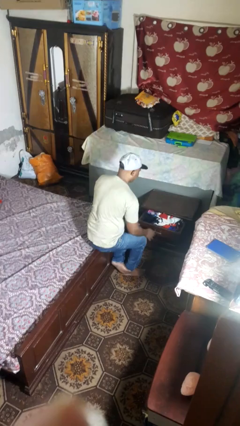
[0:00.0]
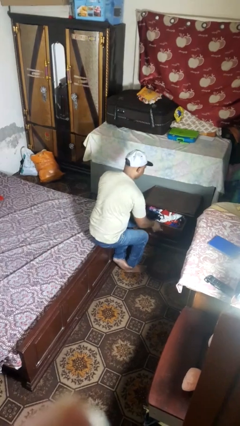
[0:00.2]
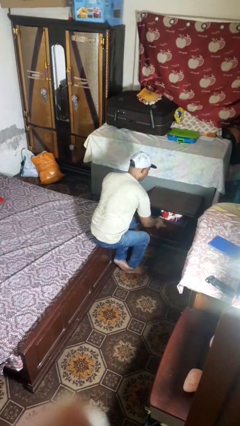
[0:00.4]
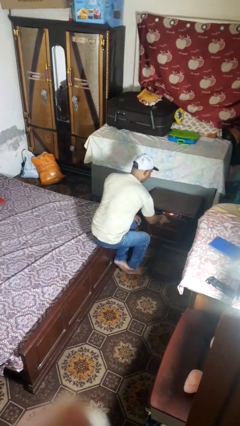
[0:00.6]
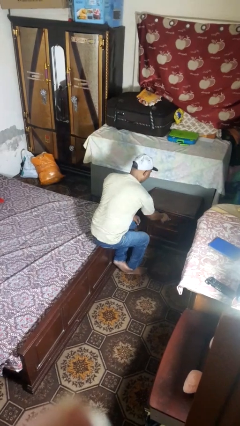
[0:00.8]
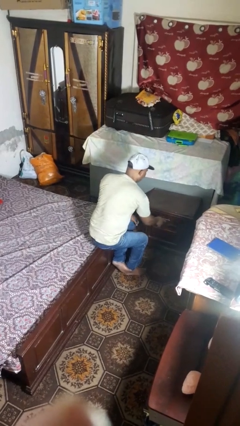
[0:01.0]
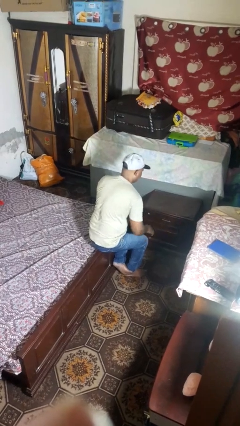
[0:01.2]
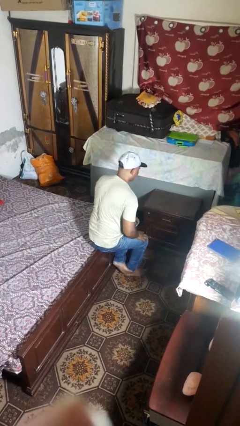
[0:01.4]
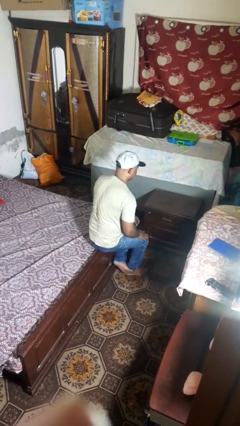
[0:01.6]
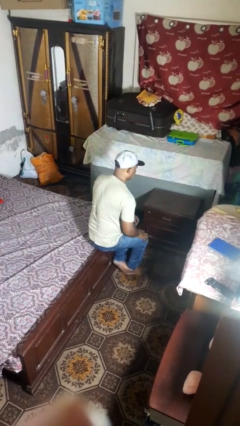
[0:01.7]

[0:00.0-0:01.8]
person closes dresser drawer

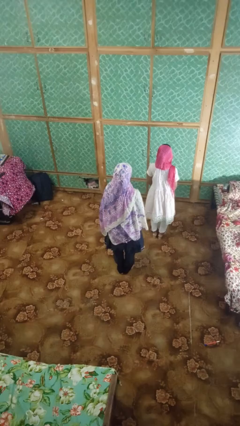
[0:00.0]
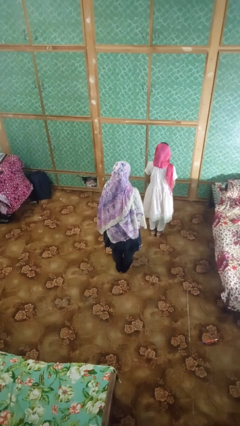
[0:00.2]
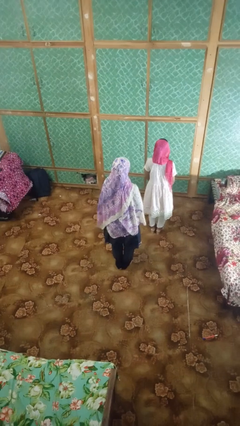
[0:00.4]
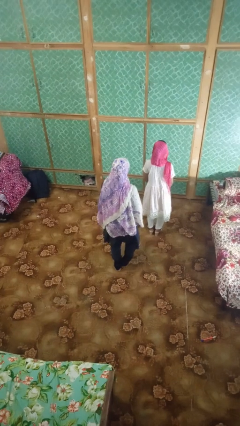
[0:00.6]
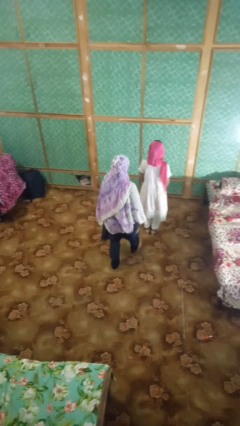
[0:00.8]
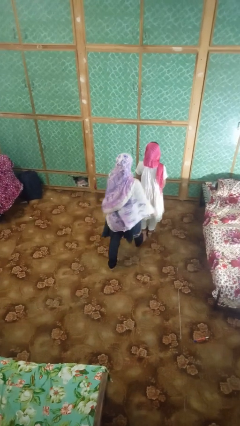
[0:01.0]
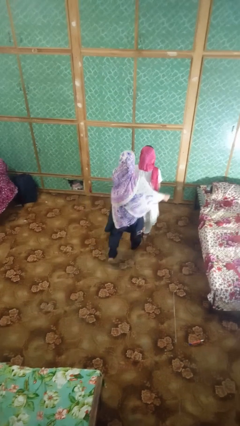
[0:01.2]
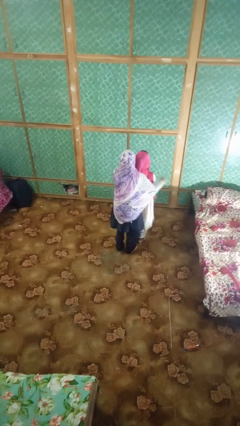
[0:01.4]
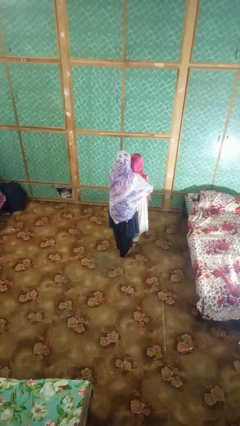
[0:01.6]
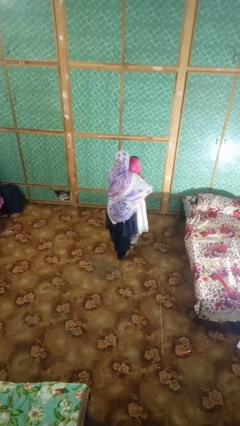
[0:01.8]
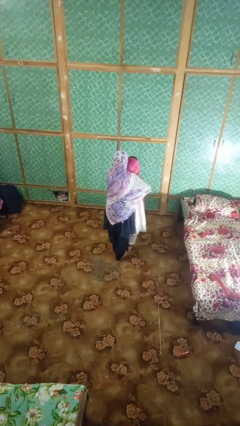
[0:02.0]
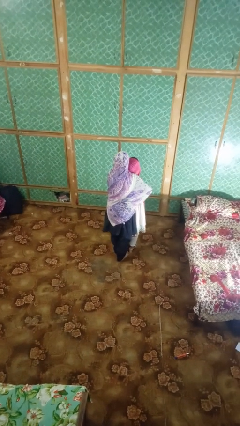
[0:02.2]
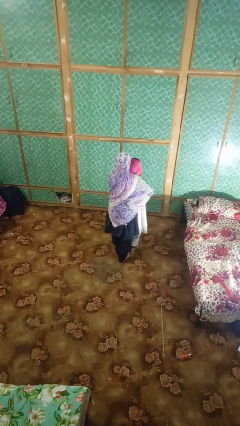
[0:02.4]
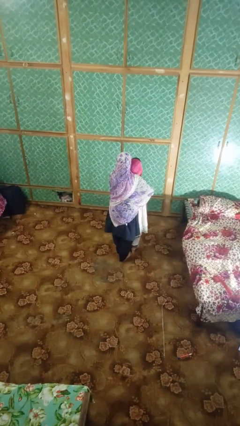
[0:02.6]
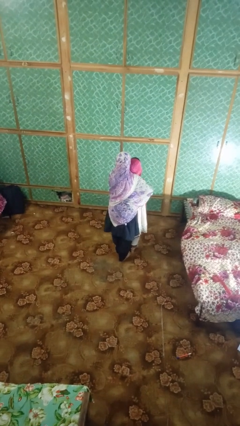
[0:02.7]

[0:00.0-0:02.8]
person hugs person from behind

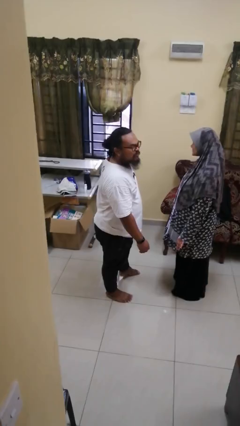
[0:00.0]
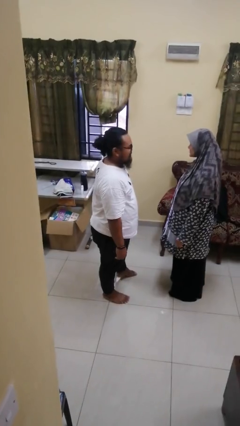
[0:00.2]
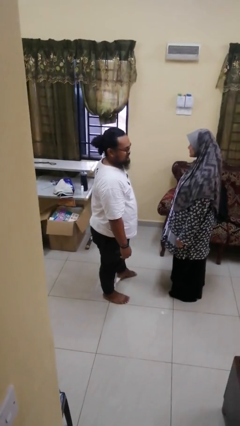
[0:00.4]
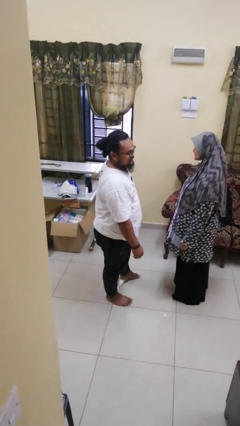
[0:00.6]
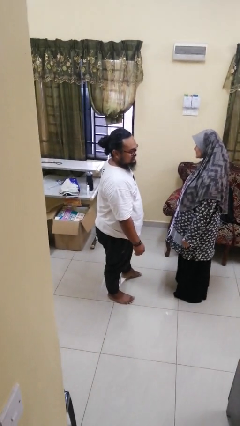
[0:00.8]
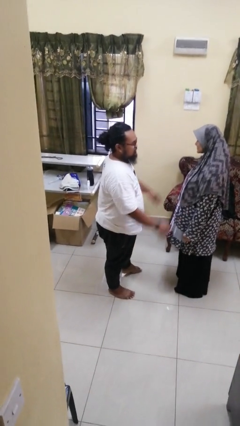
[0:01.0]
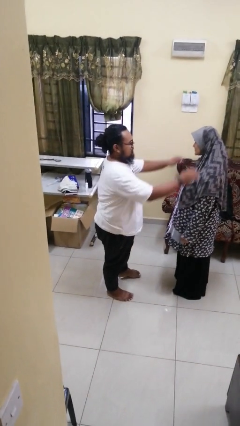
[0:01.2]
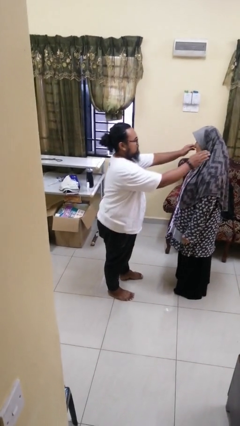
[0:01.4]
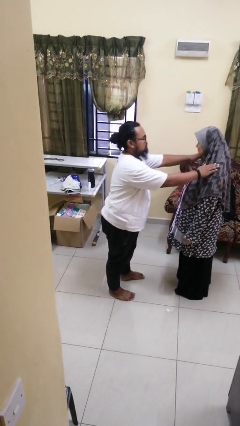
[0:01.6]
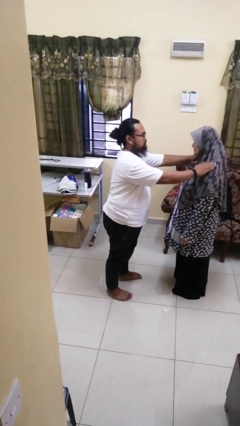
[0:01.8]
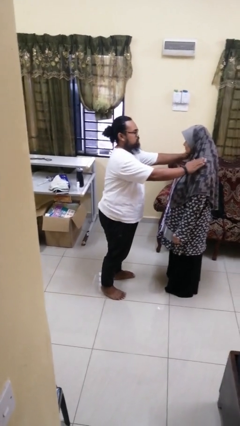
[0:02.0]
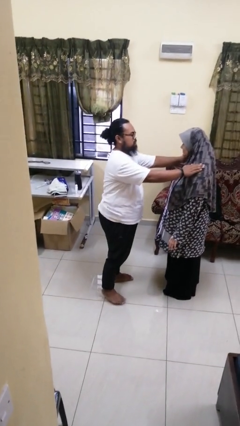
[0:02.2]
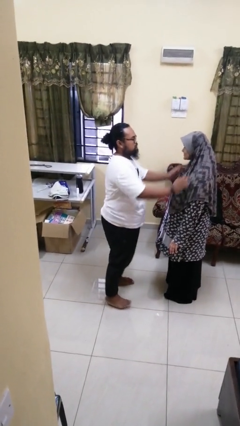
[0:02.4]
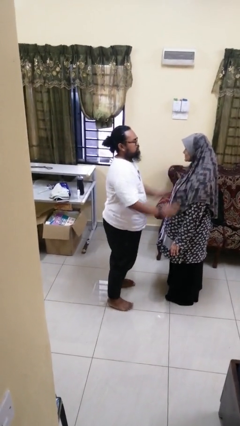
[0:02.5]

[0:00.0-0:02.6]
person pounds shoulders of person

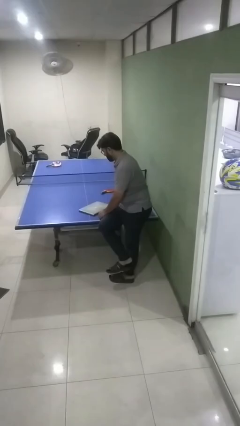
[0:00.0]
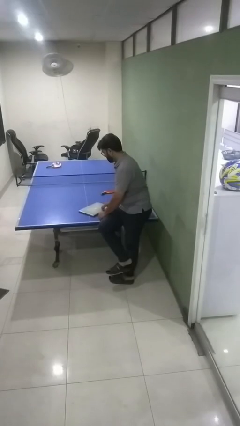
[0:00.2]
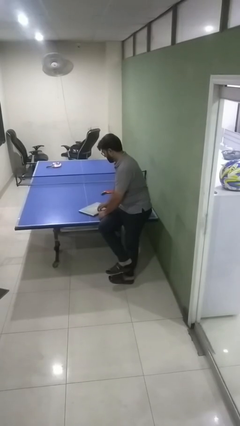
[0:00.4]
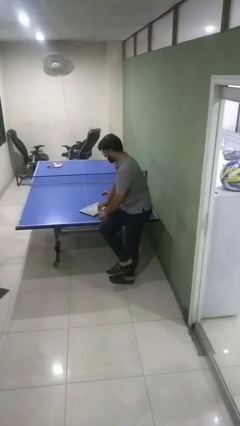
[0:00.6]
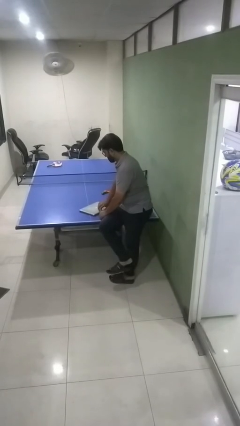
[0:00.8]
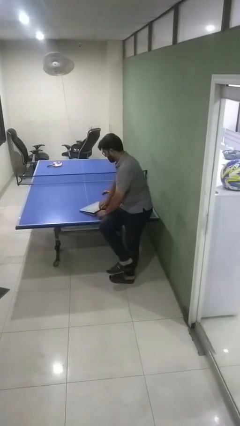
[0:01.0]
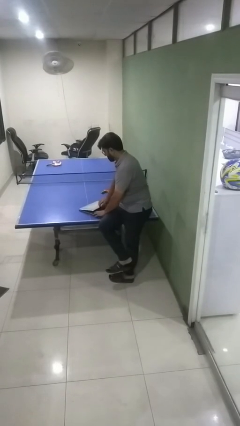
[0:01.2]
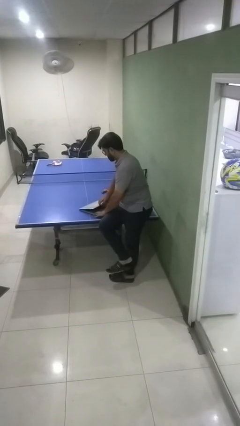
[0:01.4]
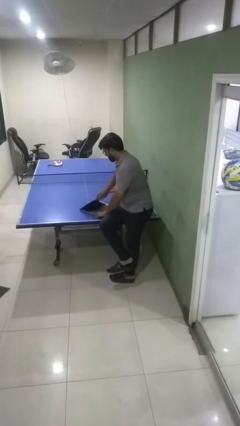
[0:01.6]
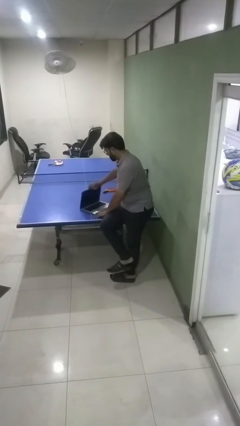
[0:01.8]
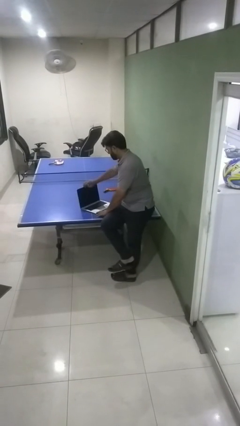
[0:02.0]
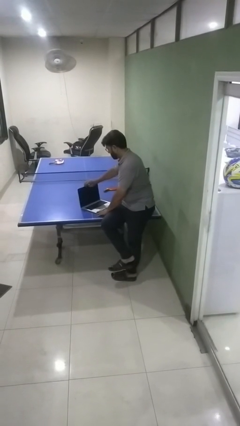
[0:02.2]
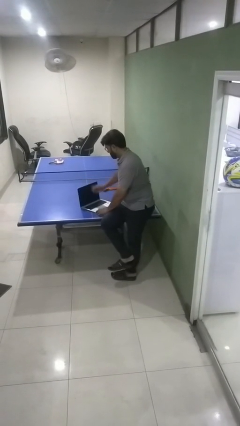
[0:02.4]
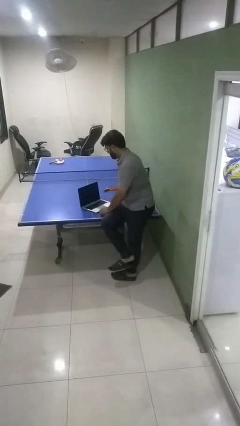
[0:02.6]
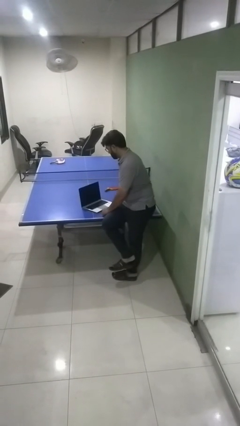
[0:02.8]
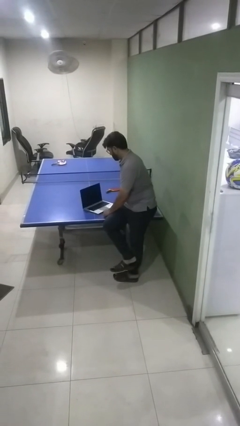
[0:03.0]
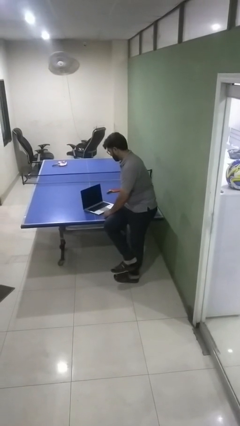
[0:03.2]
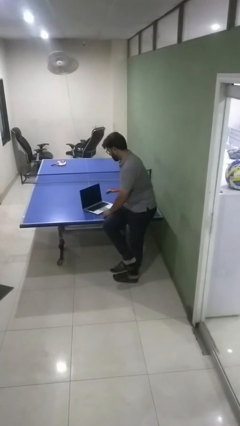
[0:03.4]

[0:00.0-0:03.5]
person opens laptop

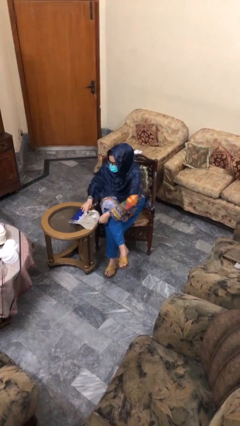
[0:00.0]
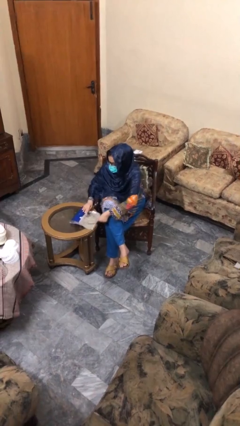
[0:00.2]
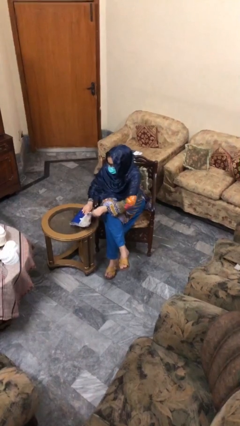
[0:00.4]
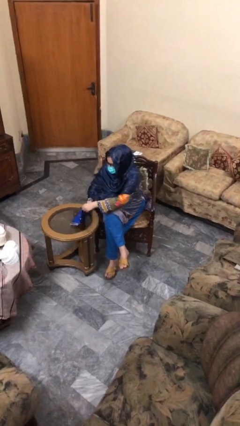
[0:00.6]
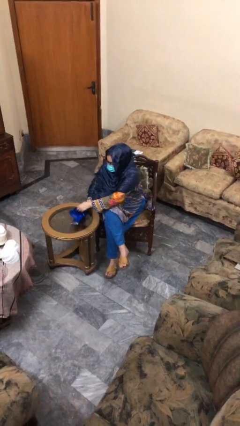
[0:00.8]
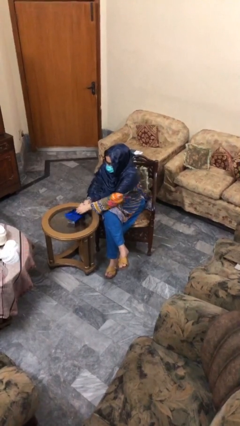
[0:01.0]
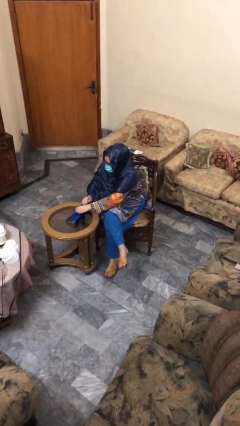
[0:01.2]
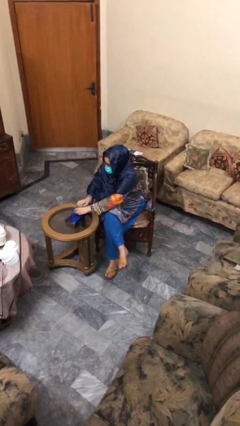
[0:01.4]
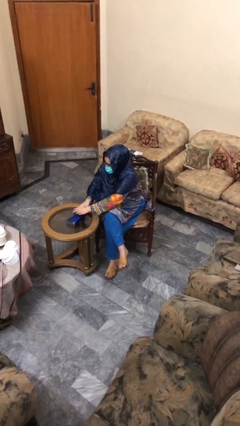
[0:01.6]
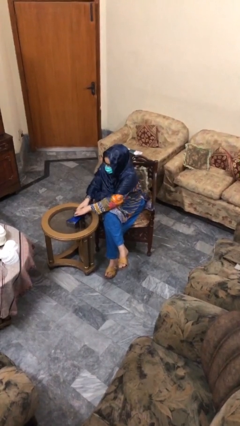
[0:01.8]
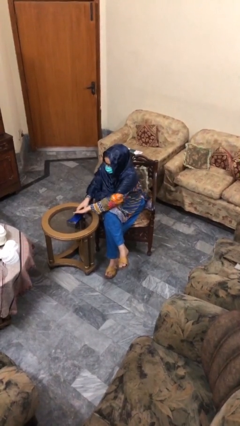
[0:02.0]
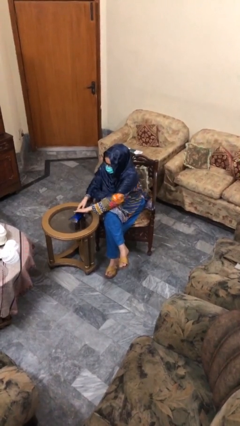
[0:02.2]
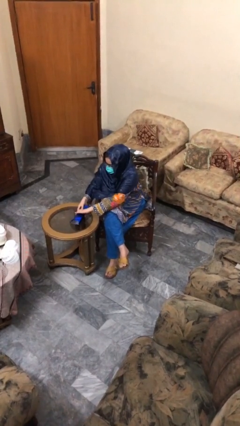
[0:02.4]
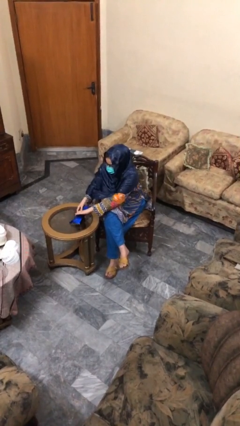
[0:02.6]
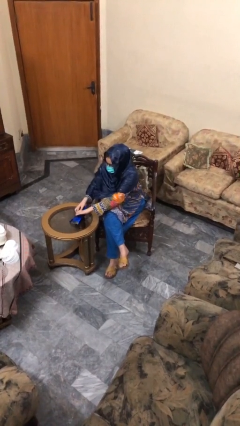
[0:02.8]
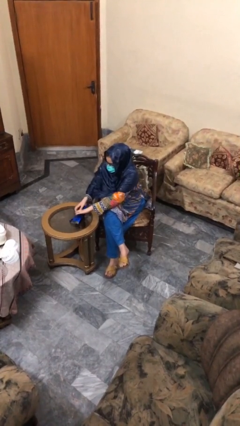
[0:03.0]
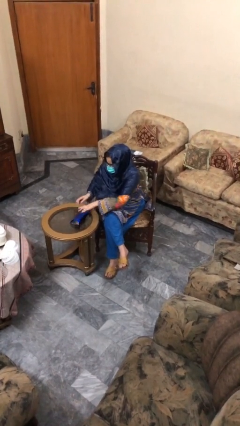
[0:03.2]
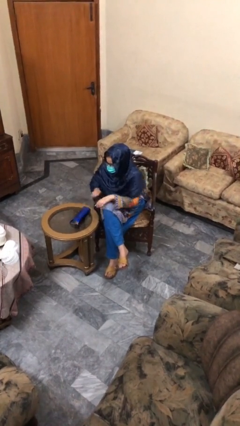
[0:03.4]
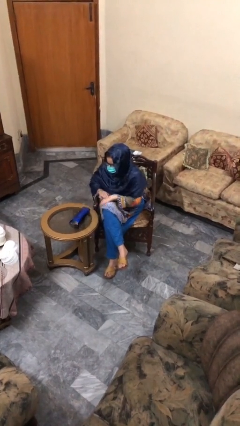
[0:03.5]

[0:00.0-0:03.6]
person wraps box

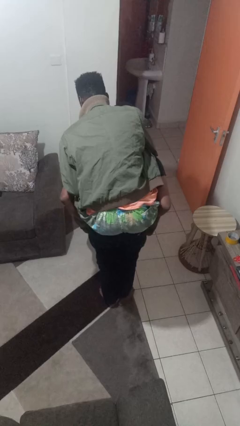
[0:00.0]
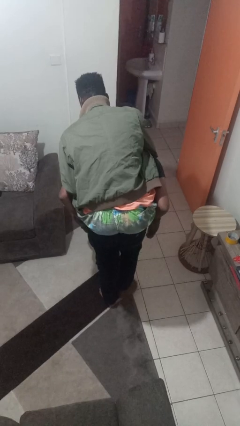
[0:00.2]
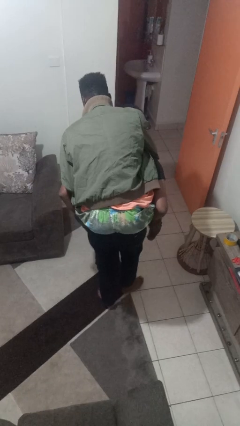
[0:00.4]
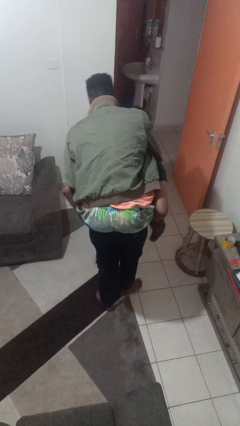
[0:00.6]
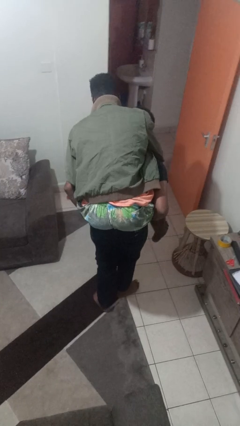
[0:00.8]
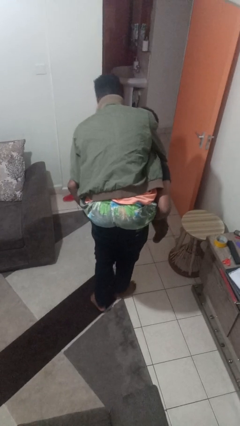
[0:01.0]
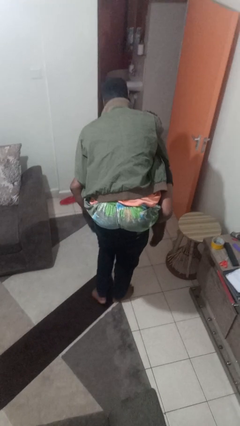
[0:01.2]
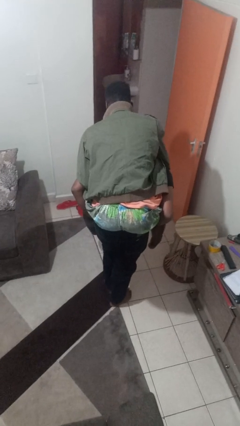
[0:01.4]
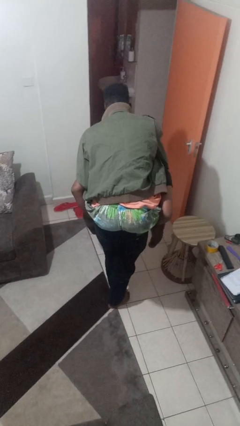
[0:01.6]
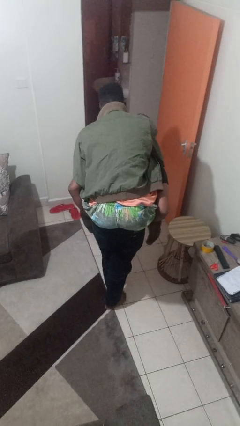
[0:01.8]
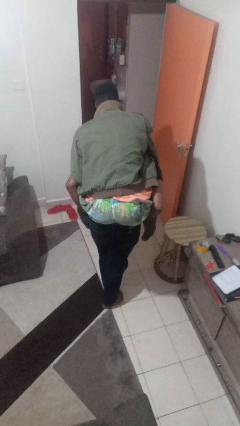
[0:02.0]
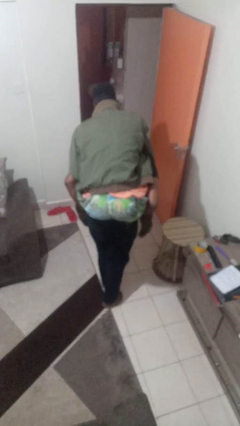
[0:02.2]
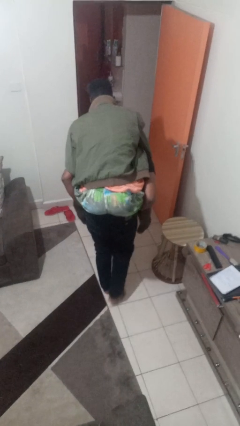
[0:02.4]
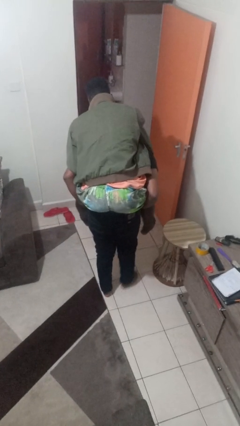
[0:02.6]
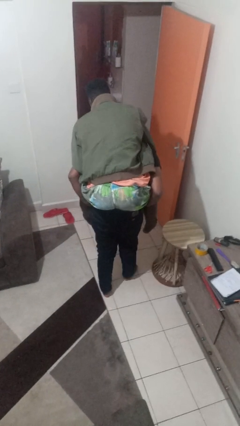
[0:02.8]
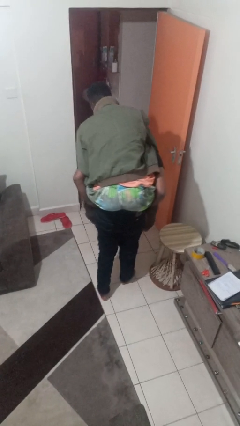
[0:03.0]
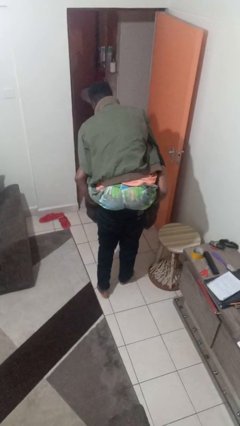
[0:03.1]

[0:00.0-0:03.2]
person carries person on back
